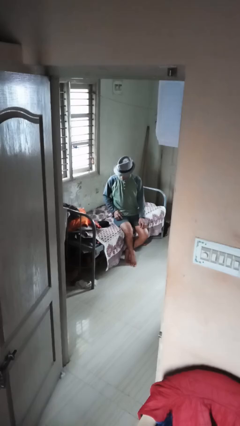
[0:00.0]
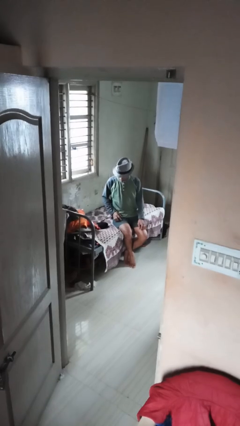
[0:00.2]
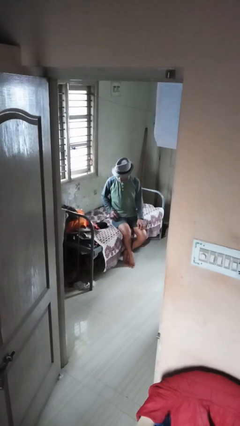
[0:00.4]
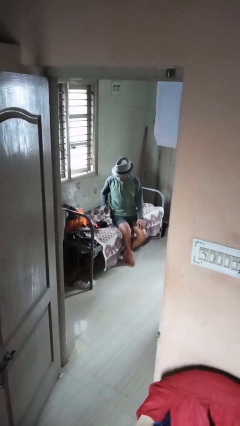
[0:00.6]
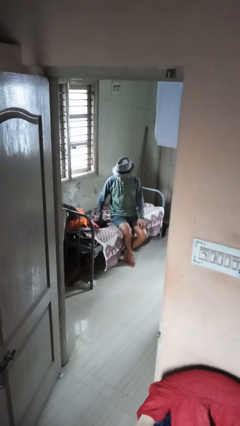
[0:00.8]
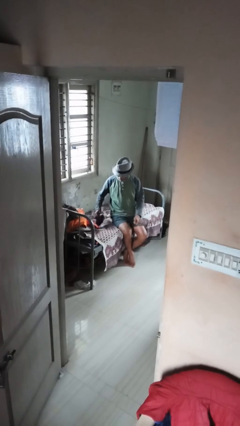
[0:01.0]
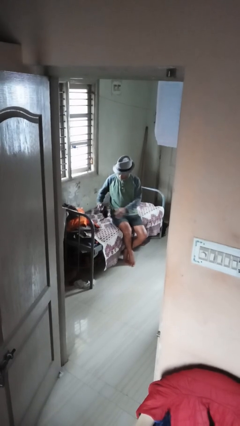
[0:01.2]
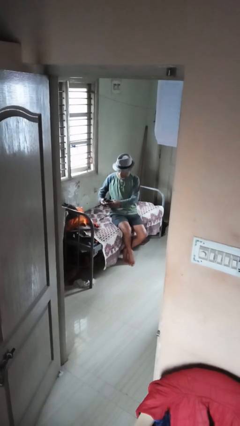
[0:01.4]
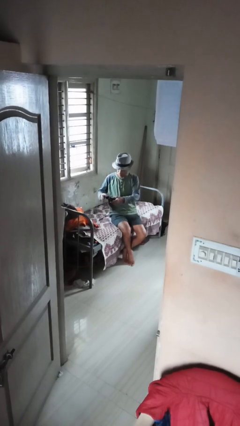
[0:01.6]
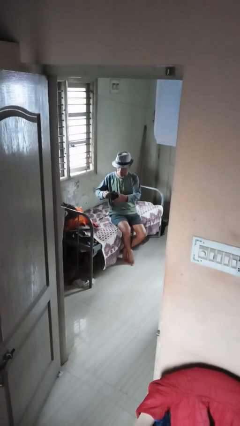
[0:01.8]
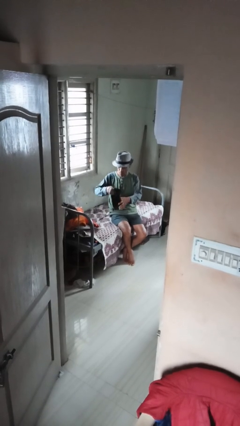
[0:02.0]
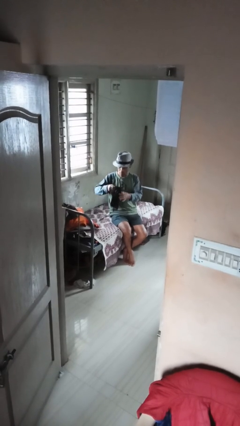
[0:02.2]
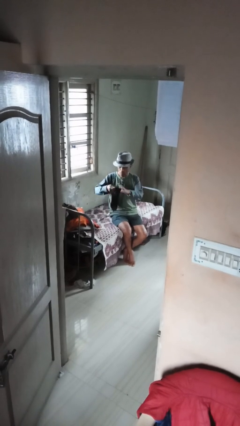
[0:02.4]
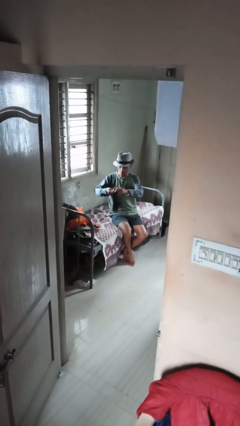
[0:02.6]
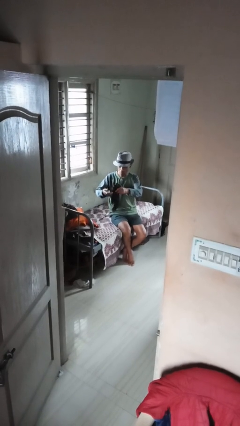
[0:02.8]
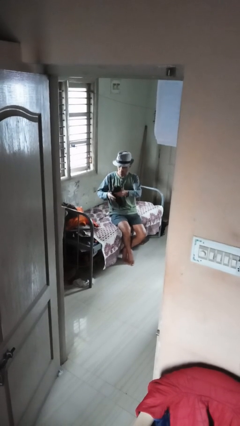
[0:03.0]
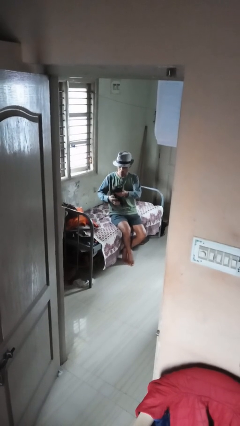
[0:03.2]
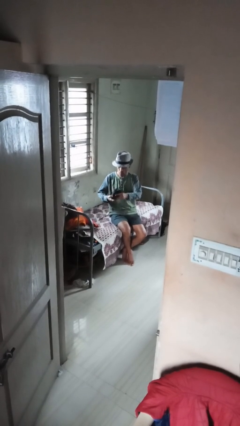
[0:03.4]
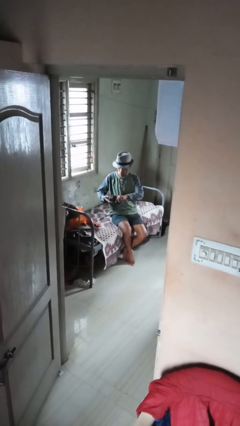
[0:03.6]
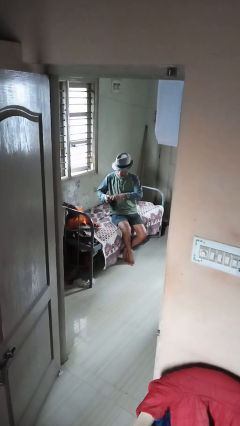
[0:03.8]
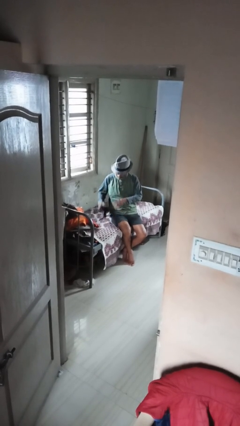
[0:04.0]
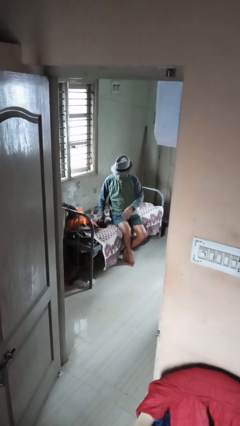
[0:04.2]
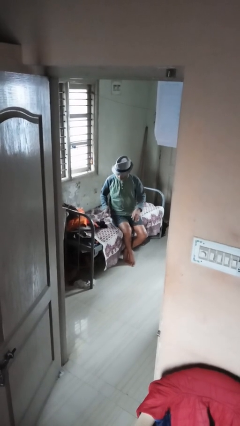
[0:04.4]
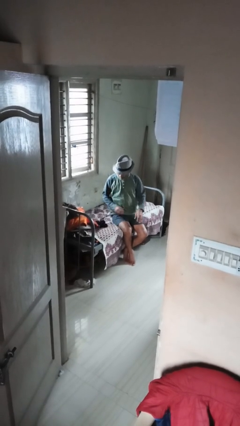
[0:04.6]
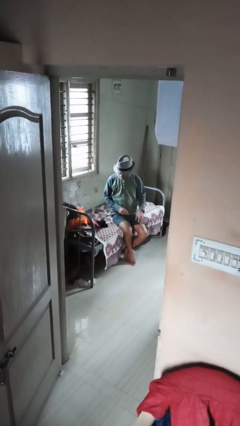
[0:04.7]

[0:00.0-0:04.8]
person folds socks

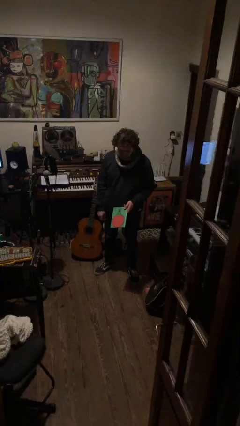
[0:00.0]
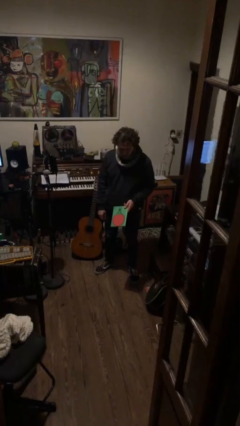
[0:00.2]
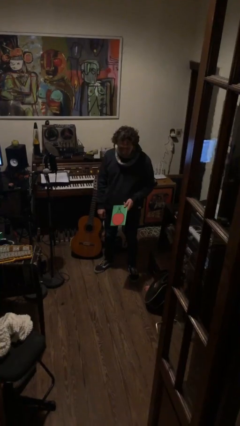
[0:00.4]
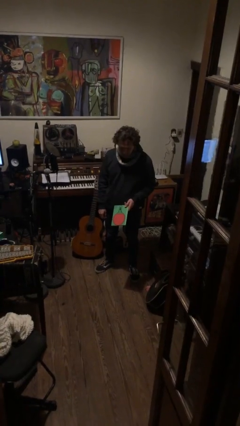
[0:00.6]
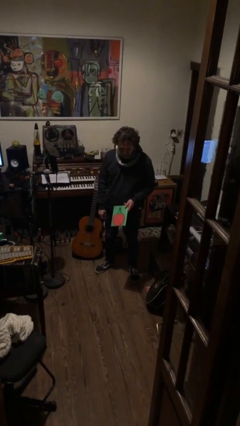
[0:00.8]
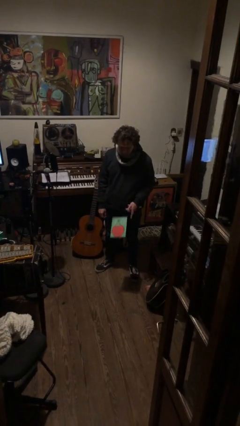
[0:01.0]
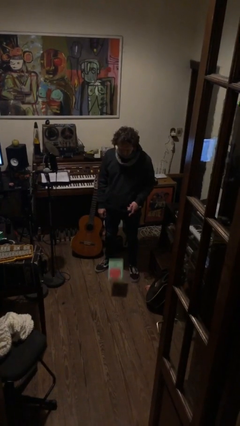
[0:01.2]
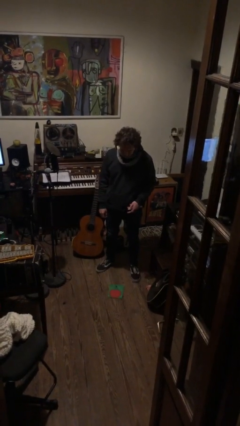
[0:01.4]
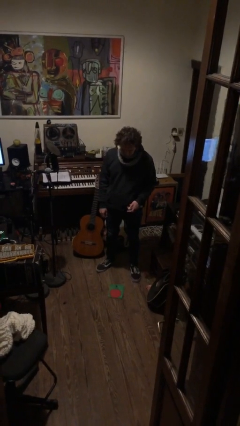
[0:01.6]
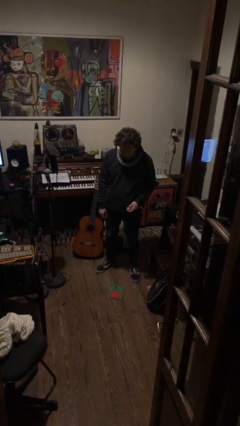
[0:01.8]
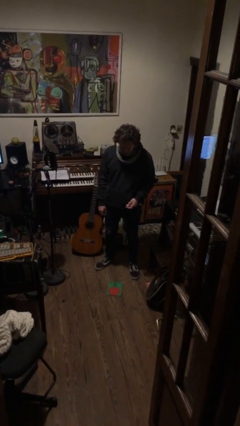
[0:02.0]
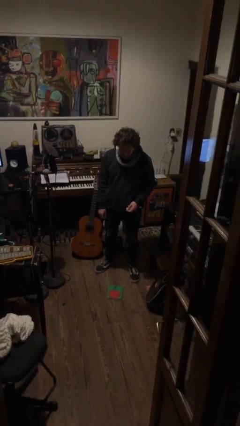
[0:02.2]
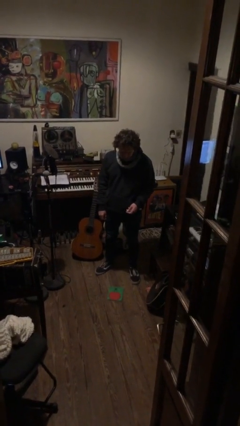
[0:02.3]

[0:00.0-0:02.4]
person drops object

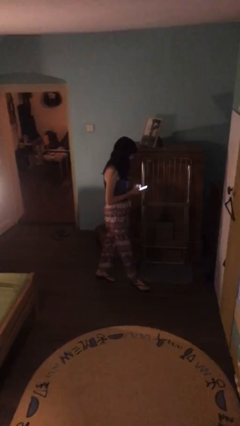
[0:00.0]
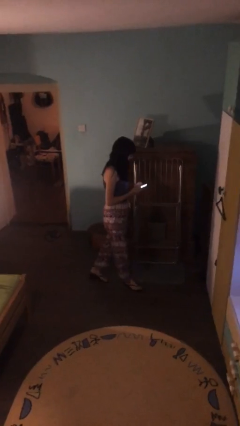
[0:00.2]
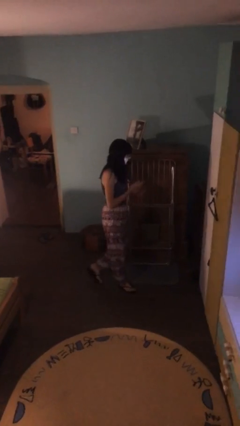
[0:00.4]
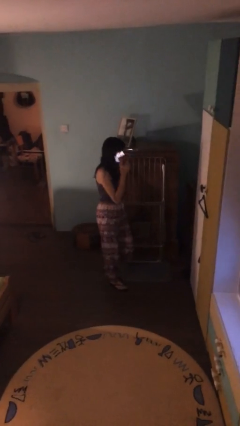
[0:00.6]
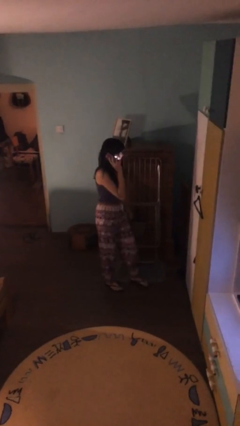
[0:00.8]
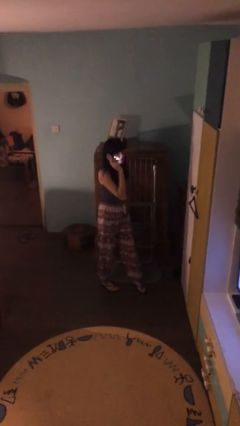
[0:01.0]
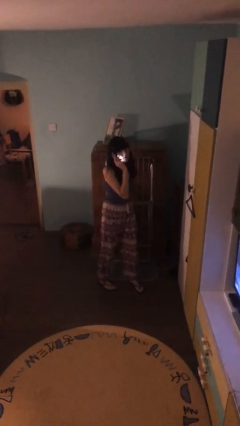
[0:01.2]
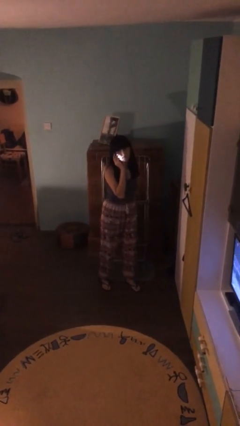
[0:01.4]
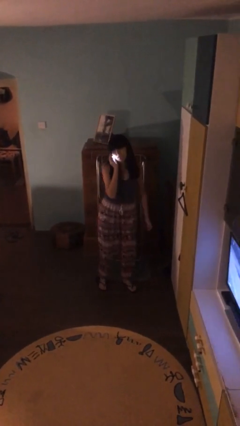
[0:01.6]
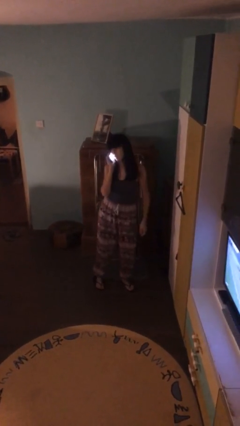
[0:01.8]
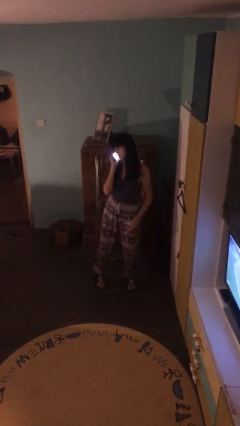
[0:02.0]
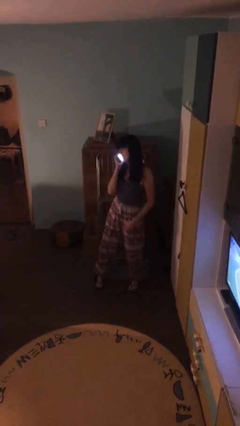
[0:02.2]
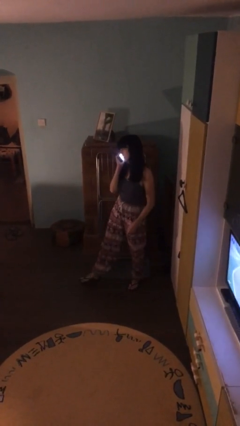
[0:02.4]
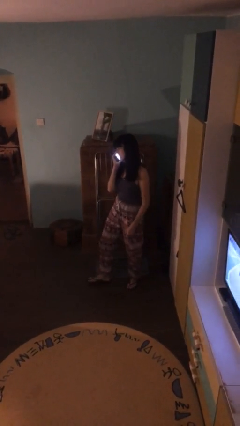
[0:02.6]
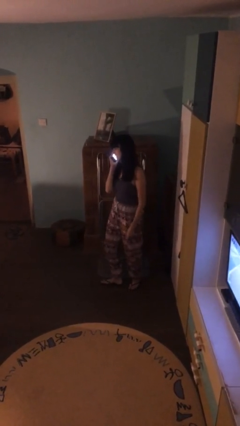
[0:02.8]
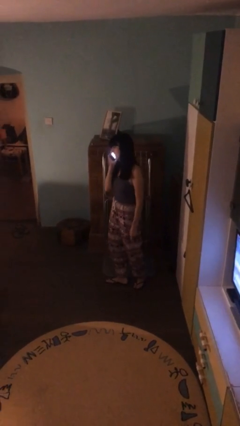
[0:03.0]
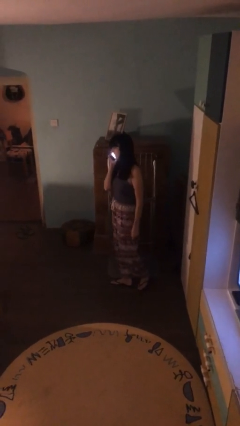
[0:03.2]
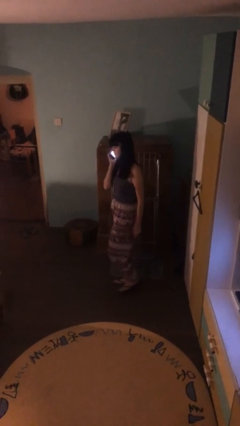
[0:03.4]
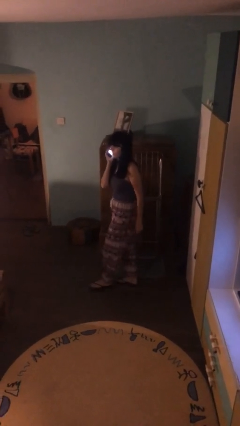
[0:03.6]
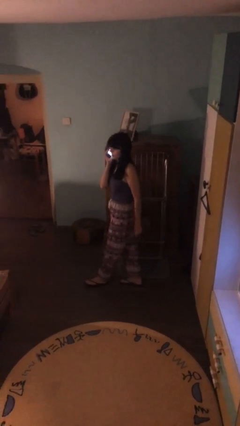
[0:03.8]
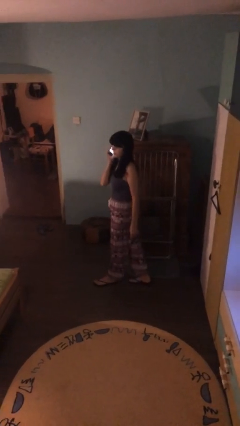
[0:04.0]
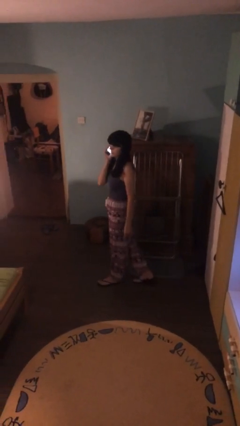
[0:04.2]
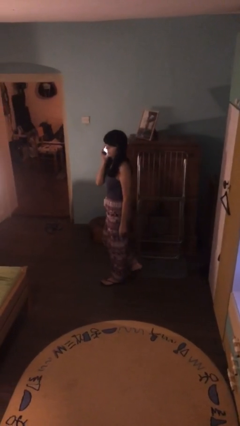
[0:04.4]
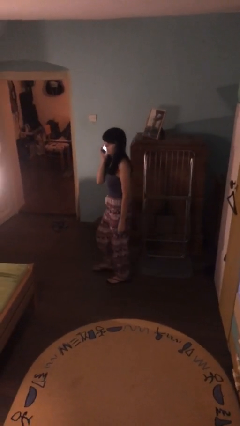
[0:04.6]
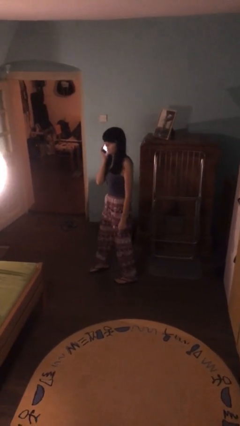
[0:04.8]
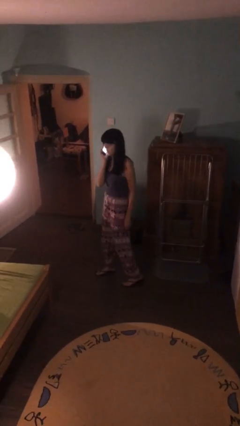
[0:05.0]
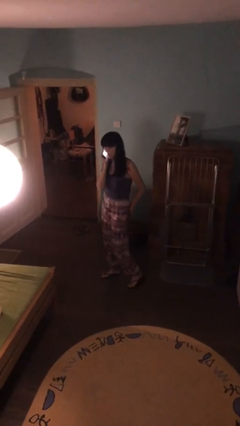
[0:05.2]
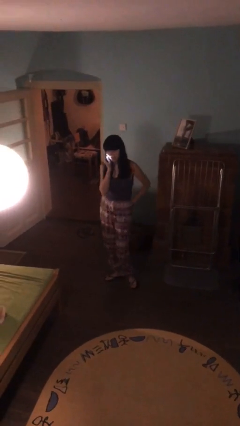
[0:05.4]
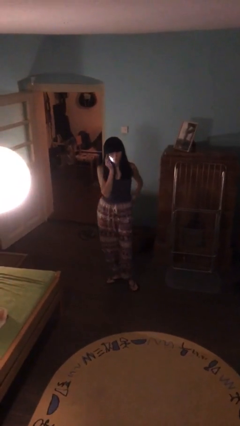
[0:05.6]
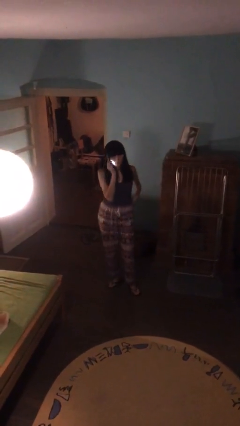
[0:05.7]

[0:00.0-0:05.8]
person talks on phone

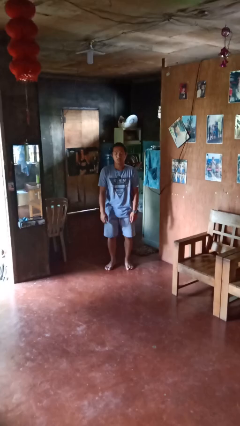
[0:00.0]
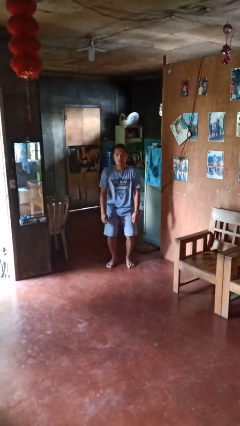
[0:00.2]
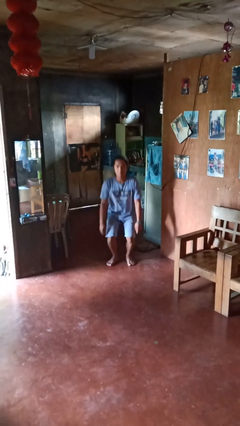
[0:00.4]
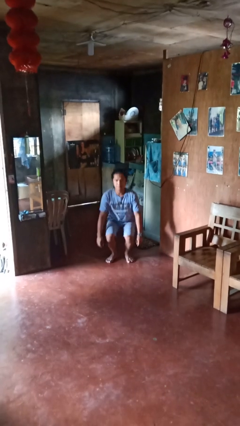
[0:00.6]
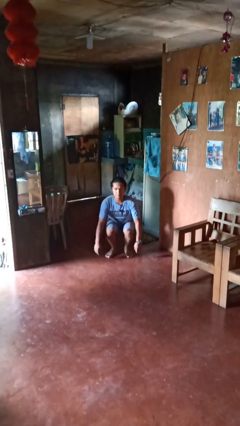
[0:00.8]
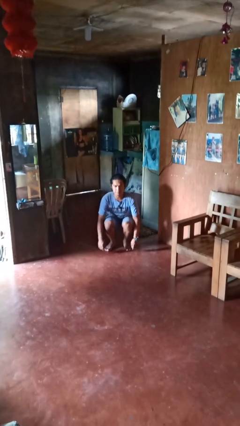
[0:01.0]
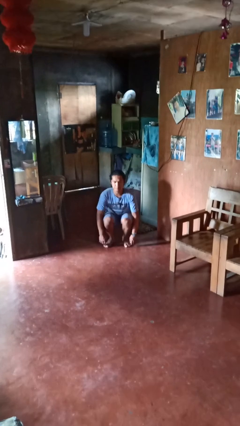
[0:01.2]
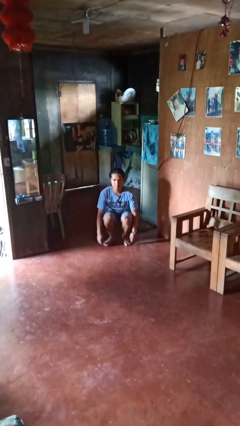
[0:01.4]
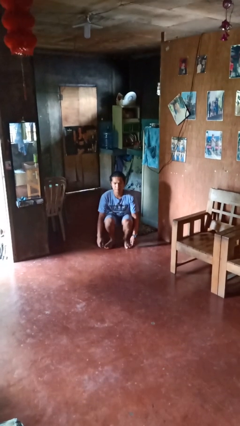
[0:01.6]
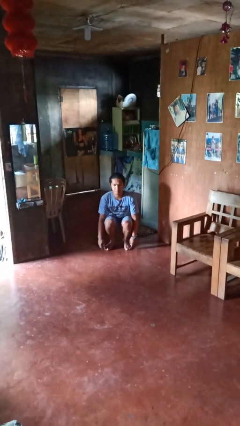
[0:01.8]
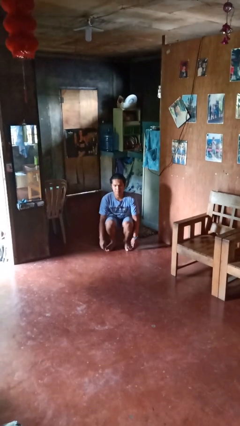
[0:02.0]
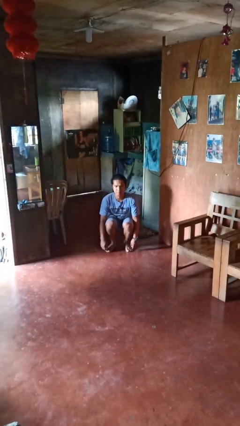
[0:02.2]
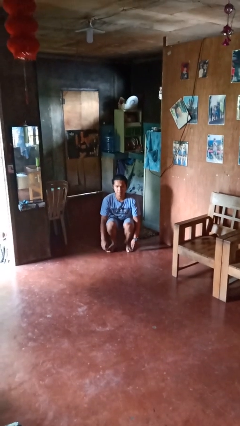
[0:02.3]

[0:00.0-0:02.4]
person squats

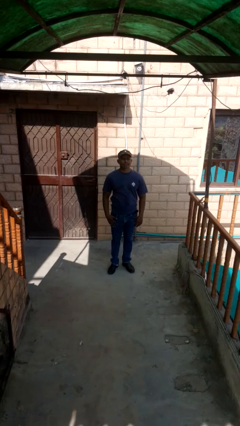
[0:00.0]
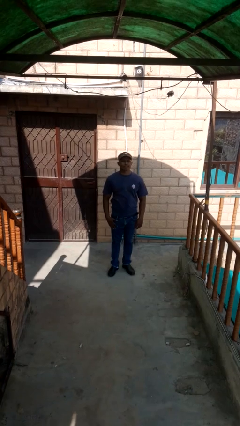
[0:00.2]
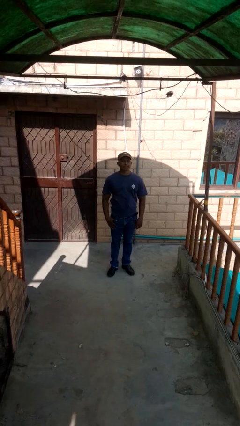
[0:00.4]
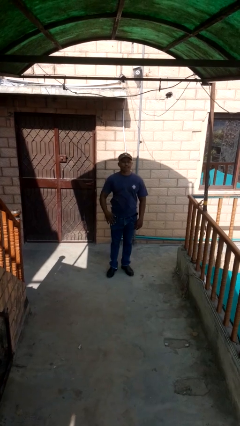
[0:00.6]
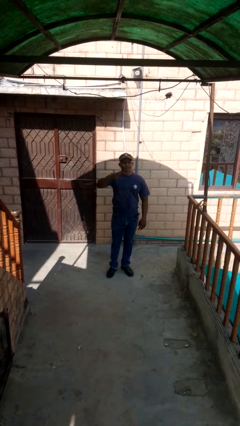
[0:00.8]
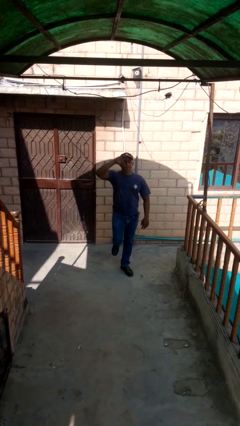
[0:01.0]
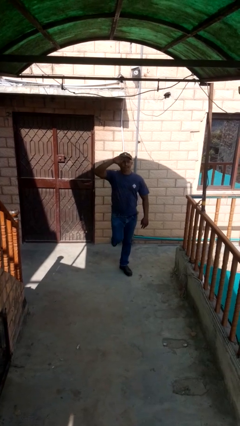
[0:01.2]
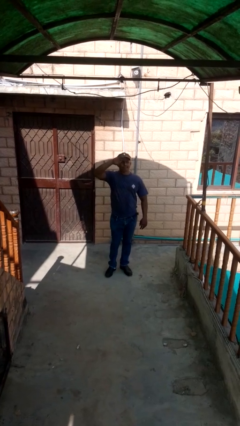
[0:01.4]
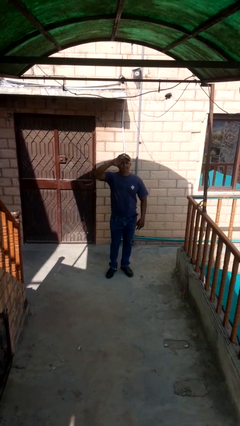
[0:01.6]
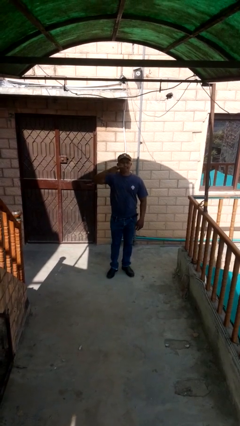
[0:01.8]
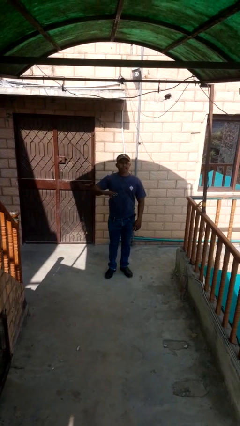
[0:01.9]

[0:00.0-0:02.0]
person salutes

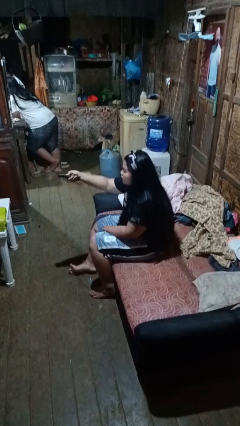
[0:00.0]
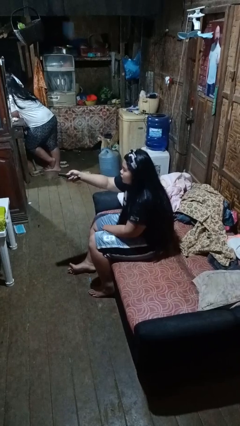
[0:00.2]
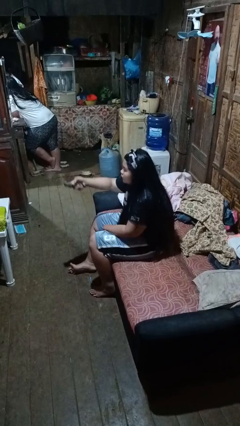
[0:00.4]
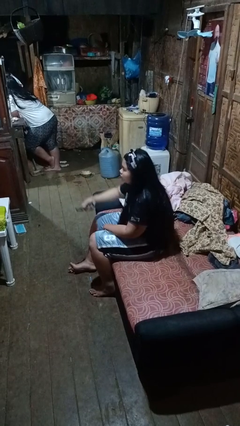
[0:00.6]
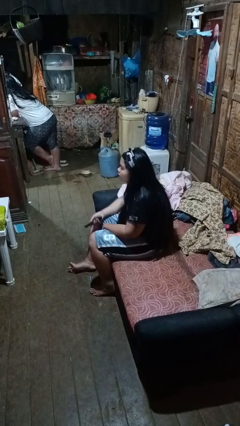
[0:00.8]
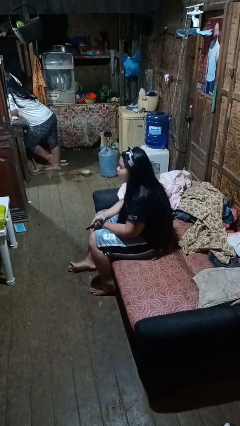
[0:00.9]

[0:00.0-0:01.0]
person uses television remote
